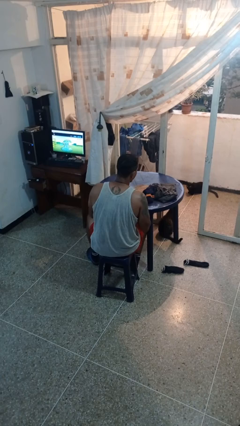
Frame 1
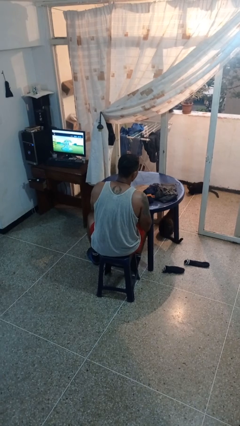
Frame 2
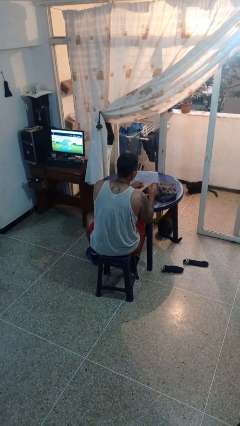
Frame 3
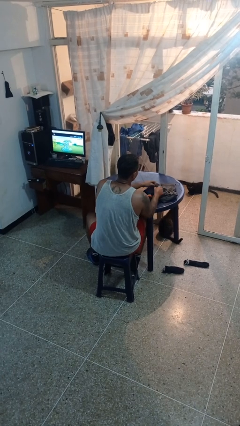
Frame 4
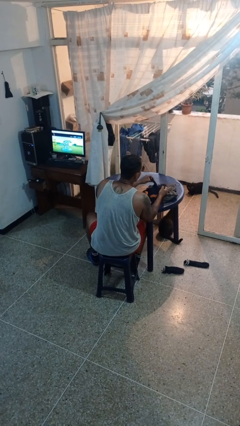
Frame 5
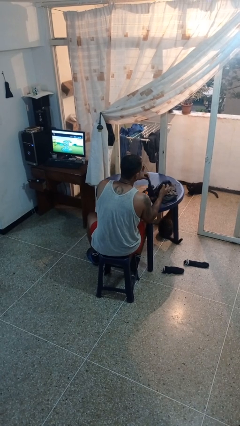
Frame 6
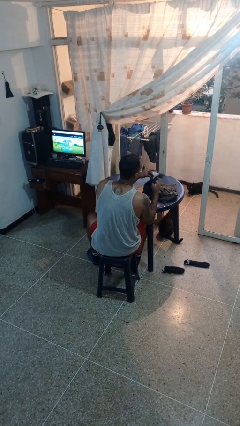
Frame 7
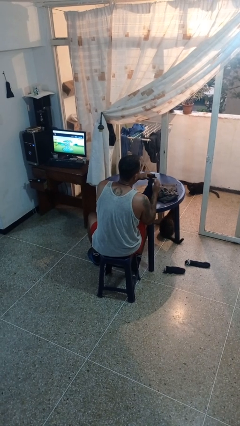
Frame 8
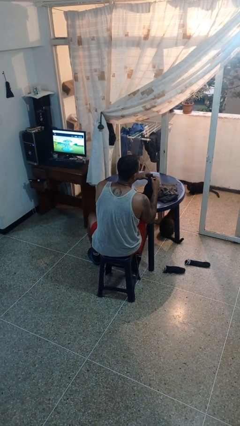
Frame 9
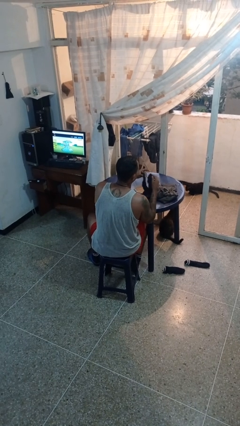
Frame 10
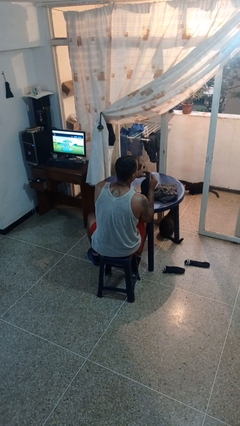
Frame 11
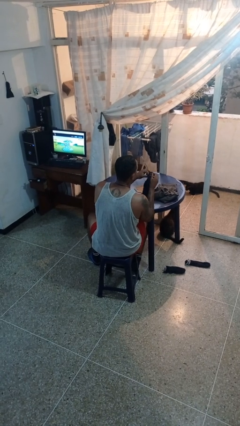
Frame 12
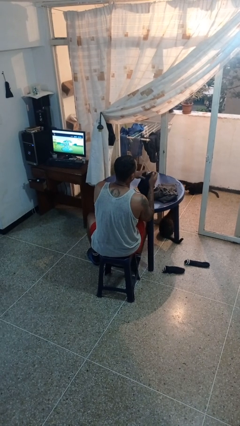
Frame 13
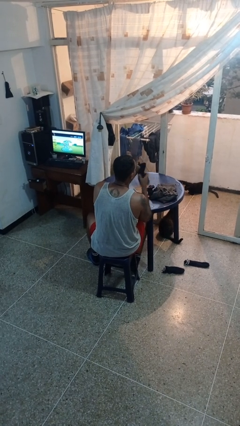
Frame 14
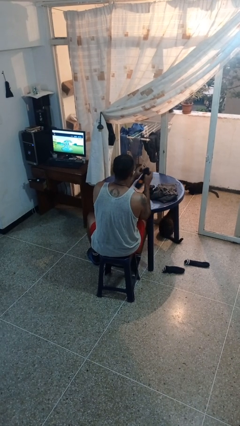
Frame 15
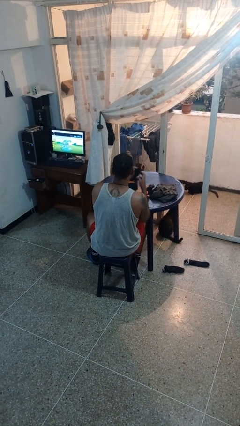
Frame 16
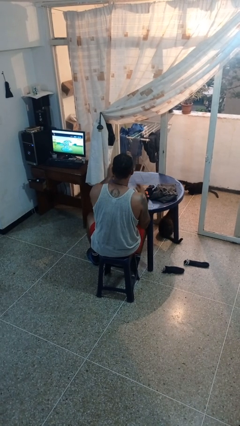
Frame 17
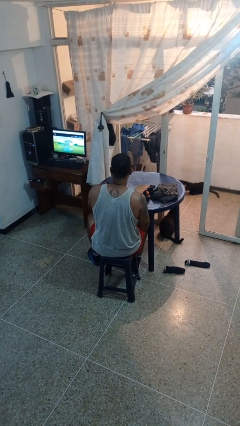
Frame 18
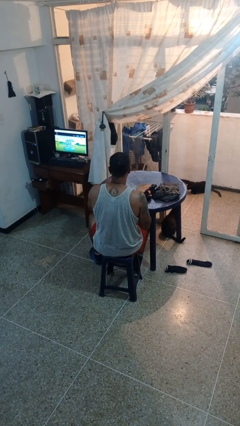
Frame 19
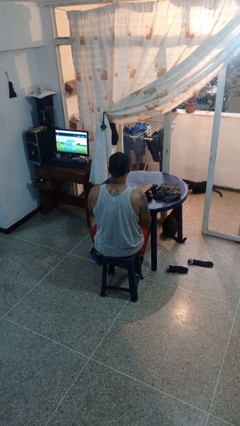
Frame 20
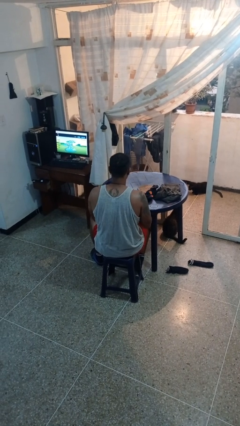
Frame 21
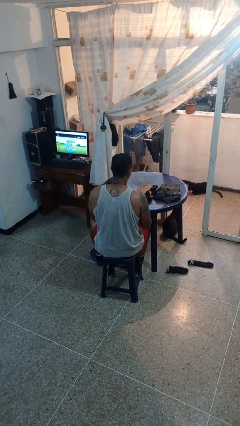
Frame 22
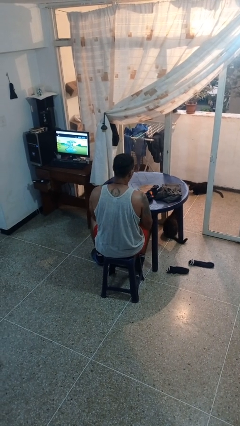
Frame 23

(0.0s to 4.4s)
person folds socks

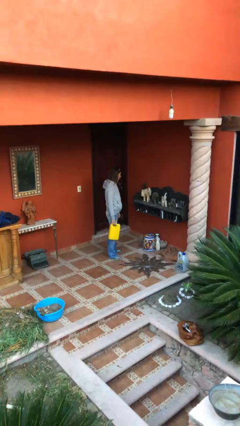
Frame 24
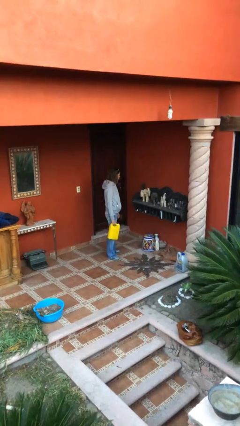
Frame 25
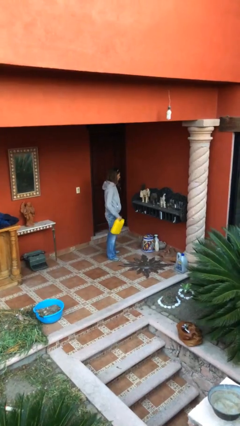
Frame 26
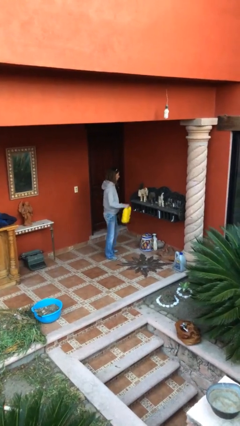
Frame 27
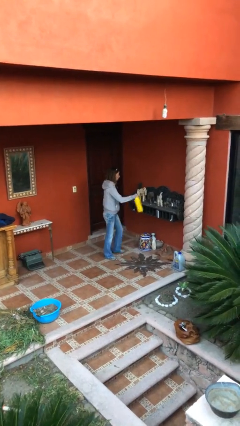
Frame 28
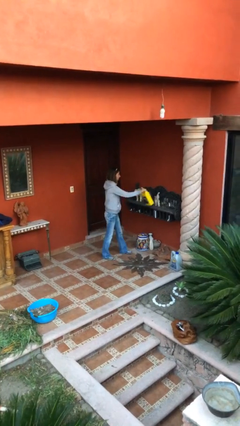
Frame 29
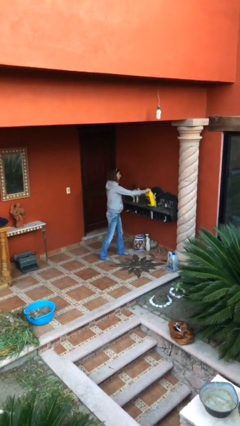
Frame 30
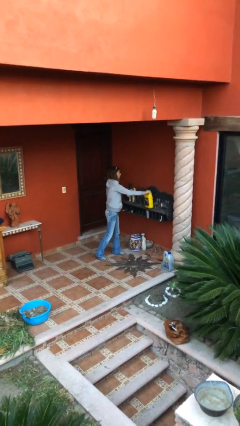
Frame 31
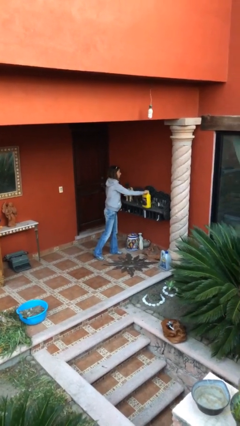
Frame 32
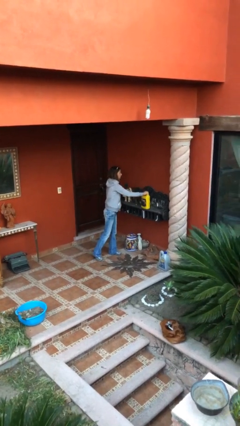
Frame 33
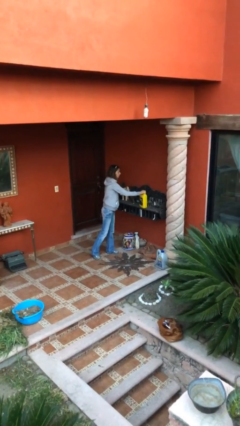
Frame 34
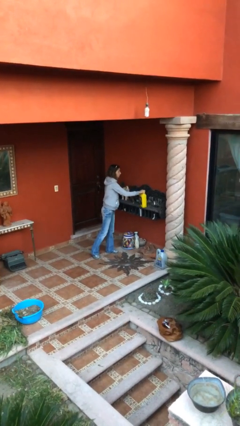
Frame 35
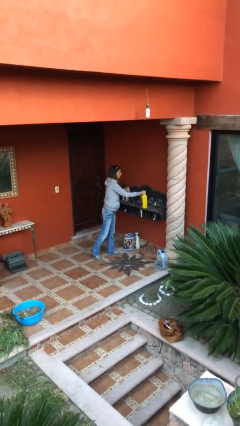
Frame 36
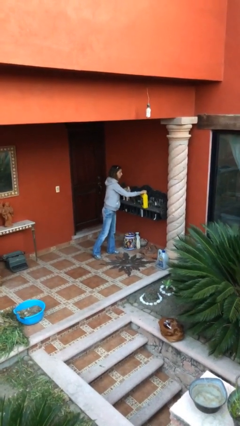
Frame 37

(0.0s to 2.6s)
person puts down object on table

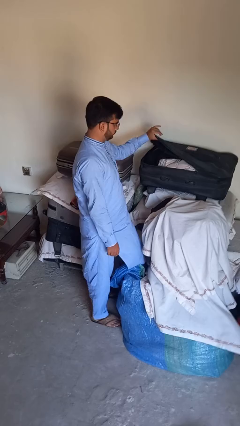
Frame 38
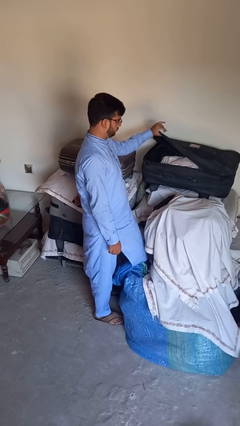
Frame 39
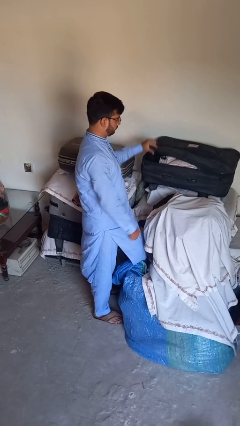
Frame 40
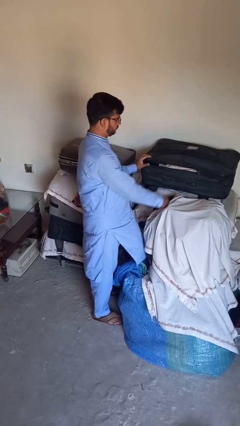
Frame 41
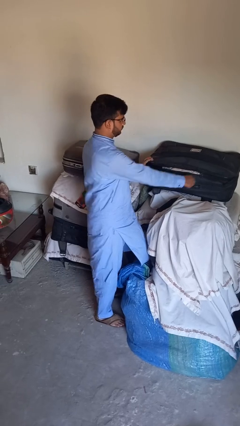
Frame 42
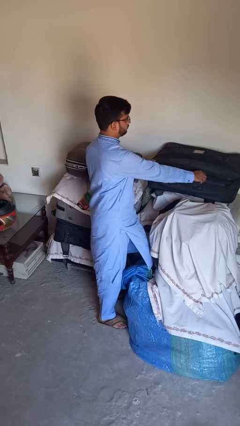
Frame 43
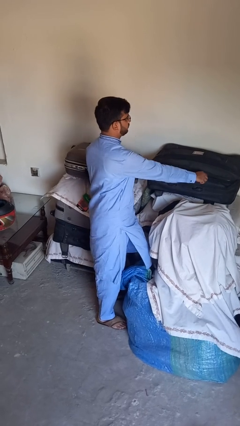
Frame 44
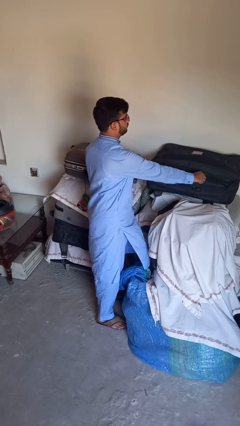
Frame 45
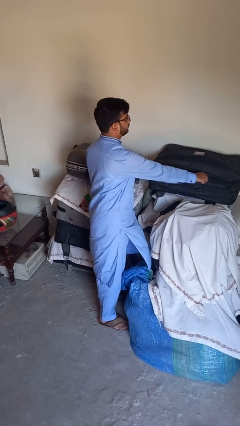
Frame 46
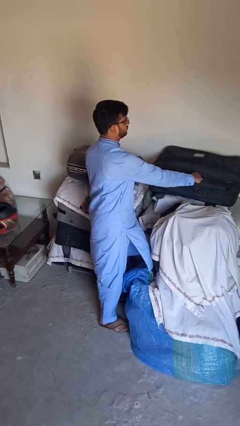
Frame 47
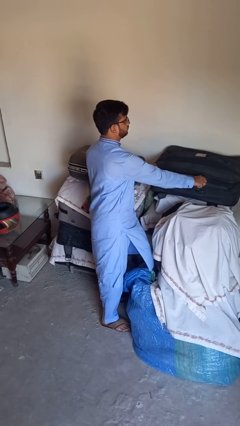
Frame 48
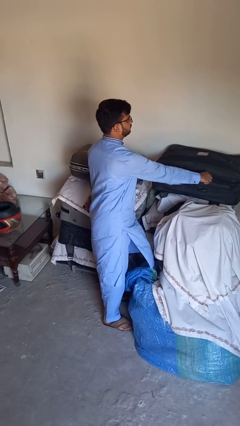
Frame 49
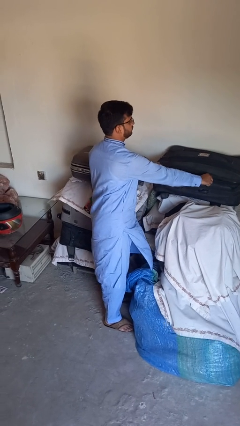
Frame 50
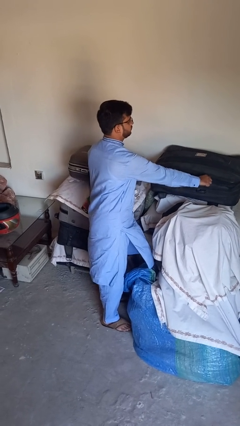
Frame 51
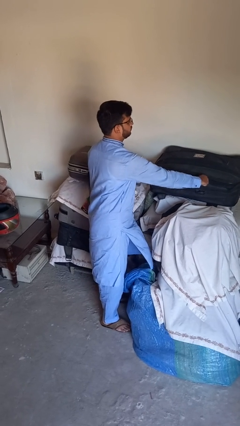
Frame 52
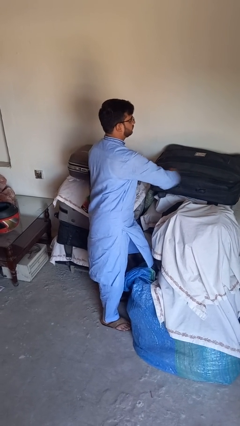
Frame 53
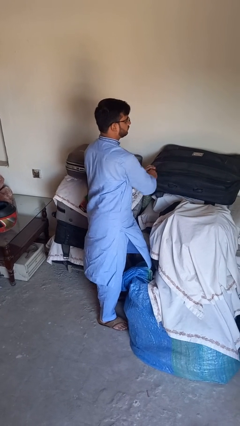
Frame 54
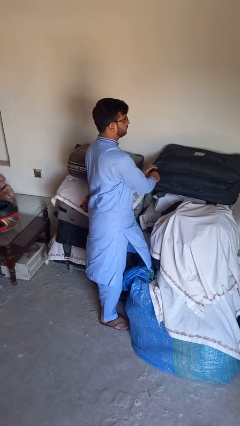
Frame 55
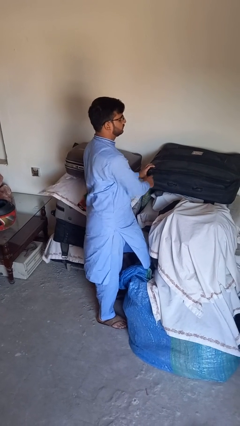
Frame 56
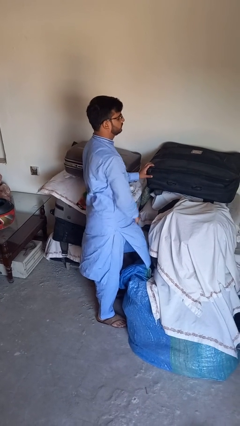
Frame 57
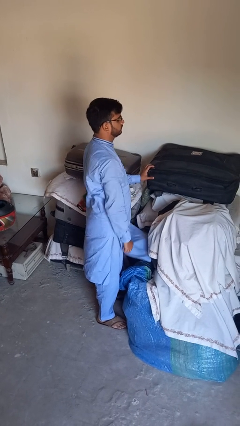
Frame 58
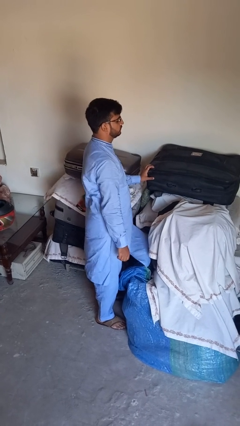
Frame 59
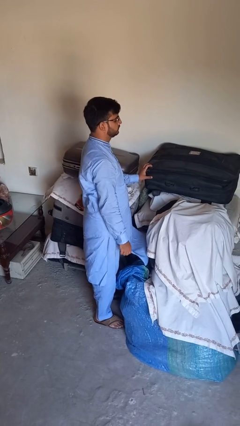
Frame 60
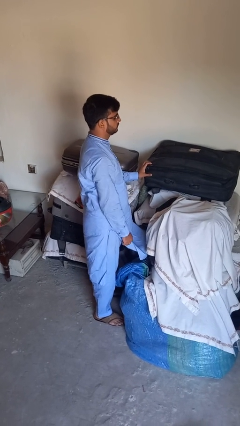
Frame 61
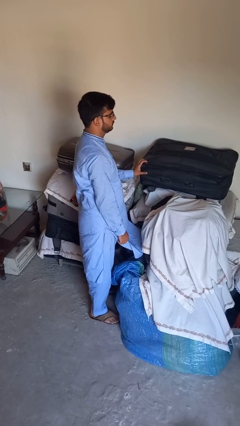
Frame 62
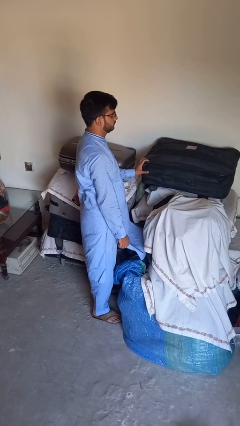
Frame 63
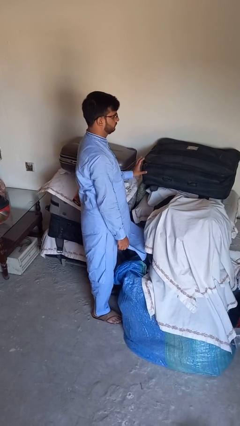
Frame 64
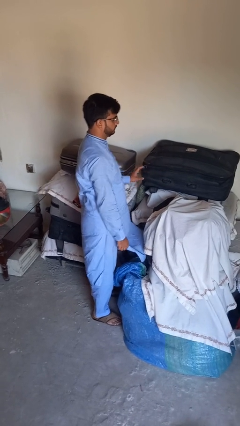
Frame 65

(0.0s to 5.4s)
person closes suitcase

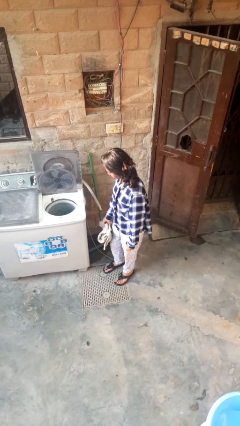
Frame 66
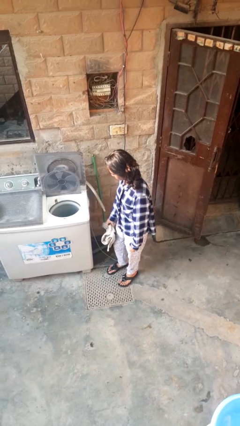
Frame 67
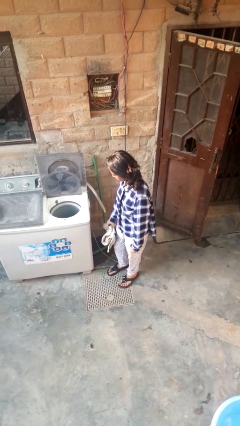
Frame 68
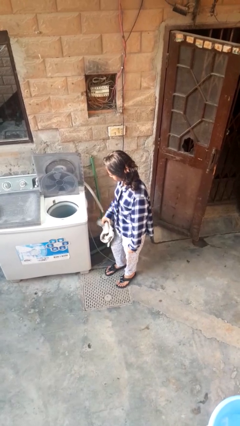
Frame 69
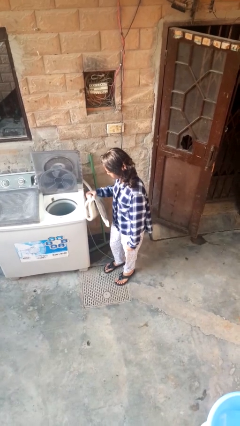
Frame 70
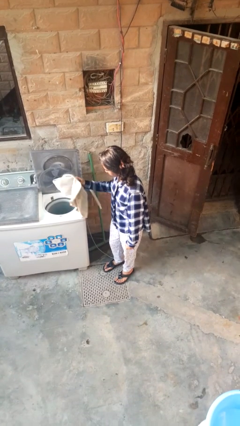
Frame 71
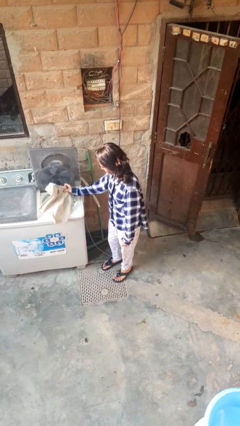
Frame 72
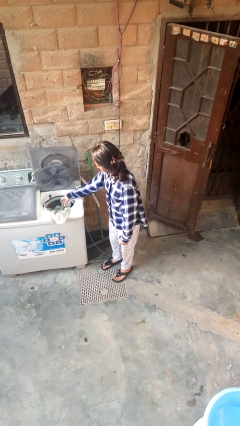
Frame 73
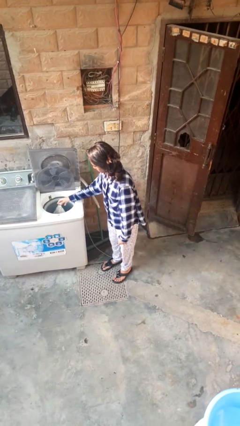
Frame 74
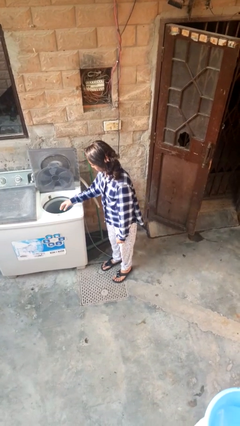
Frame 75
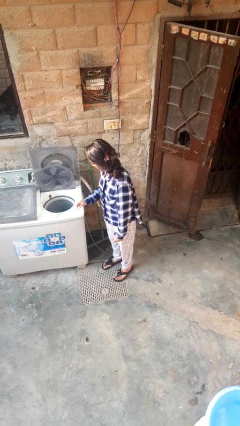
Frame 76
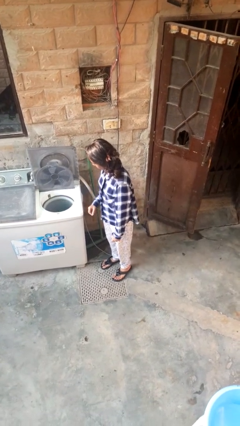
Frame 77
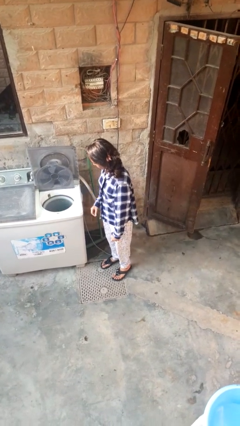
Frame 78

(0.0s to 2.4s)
person loads dryer

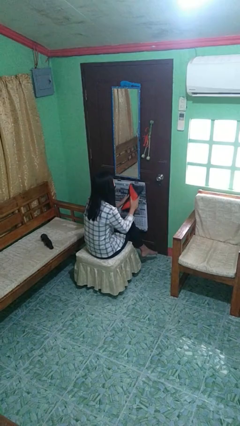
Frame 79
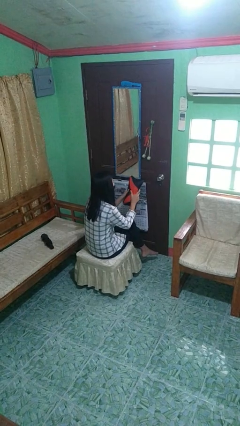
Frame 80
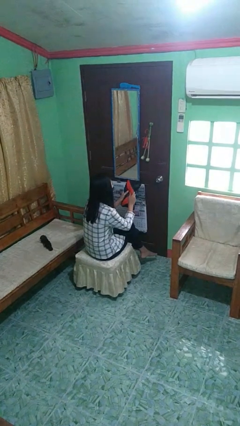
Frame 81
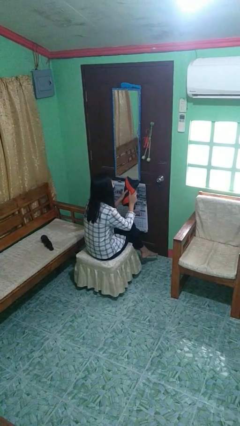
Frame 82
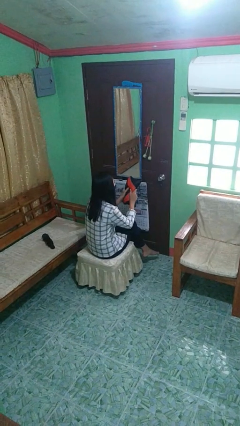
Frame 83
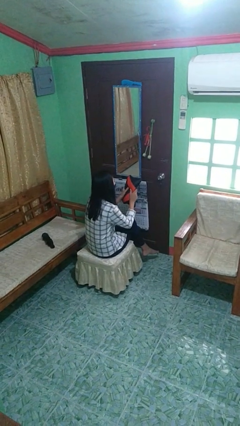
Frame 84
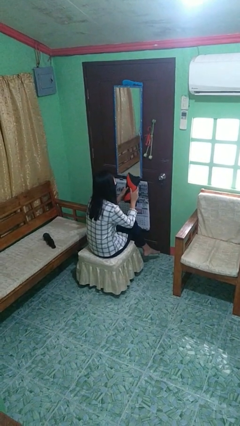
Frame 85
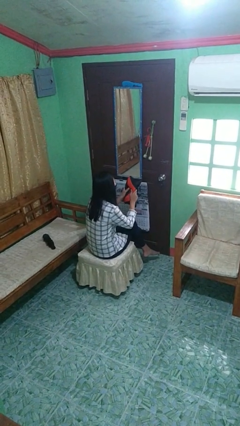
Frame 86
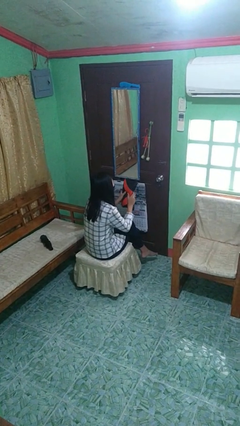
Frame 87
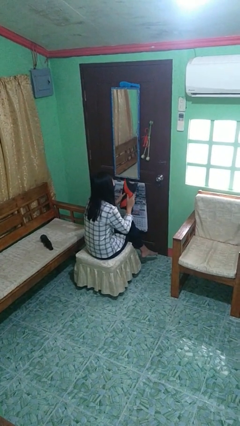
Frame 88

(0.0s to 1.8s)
person squeezes object

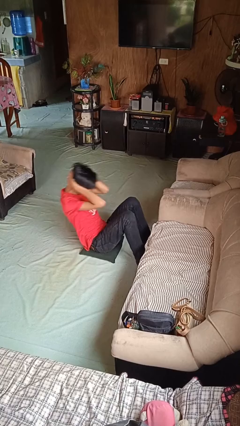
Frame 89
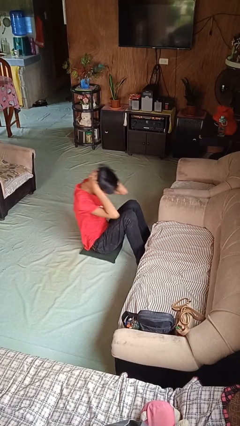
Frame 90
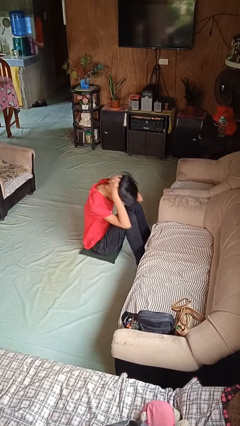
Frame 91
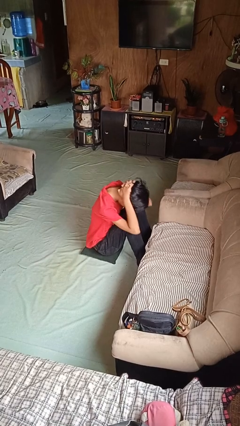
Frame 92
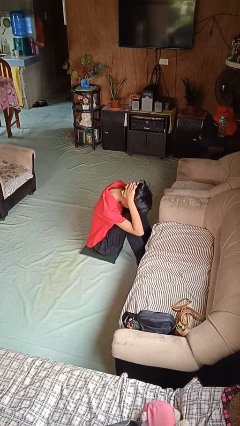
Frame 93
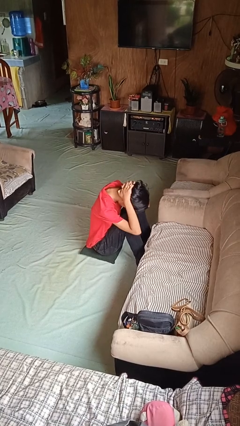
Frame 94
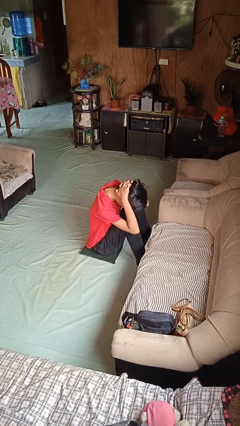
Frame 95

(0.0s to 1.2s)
person exercises with situp
